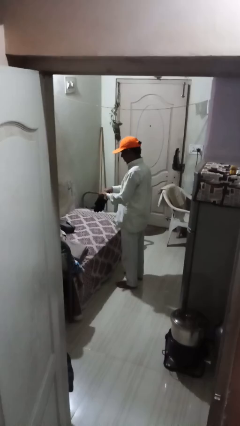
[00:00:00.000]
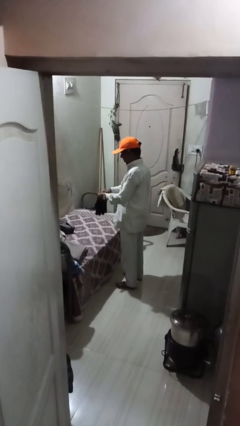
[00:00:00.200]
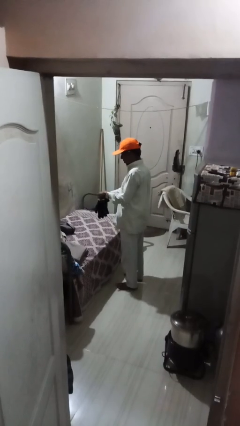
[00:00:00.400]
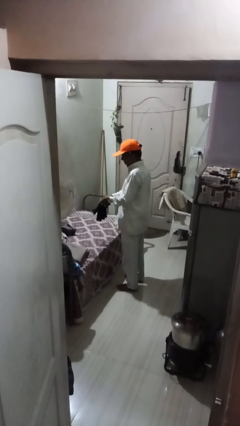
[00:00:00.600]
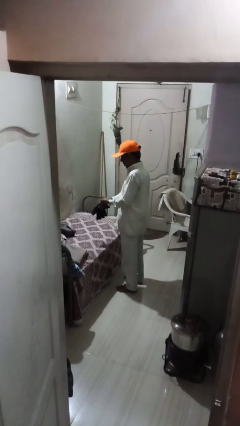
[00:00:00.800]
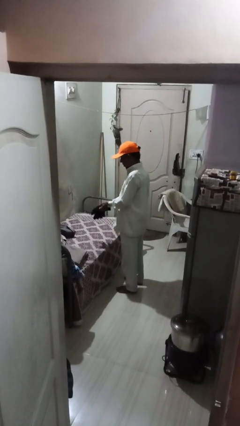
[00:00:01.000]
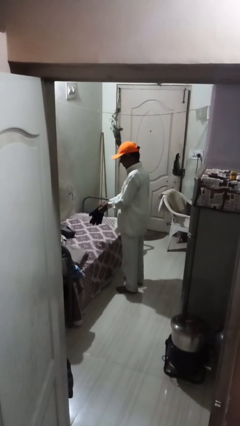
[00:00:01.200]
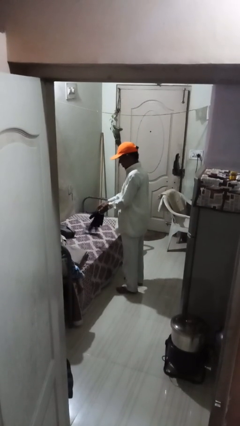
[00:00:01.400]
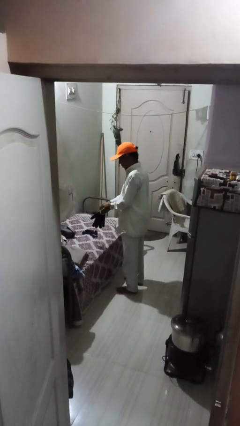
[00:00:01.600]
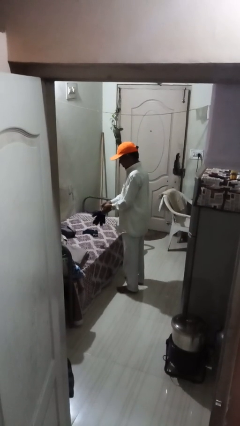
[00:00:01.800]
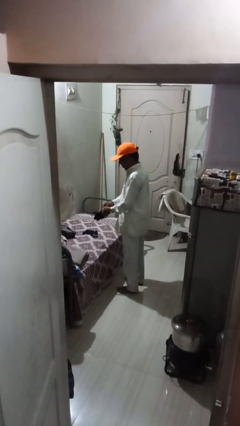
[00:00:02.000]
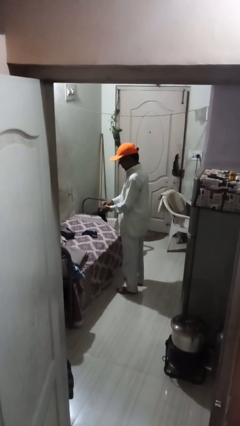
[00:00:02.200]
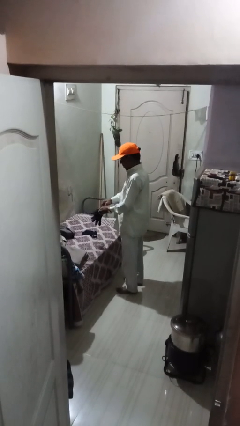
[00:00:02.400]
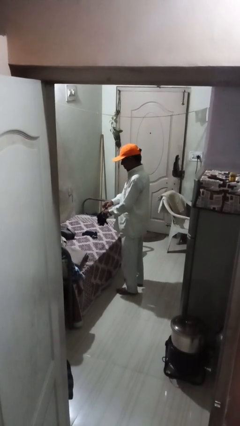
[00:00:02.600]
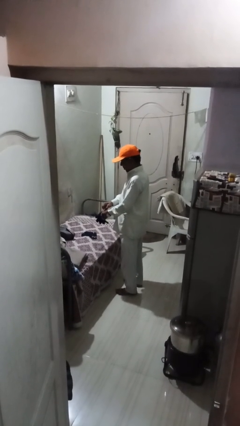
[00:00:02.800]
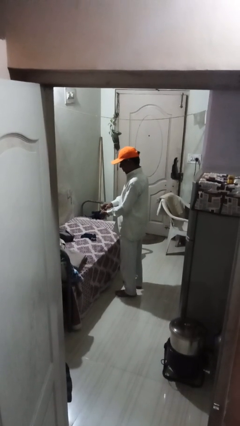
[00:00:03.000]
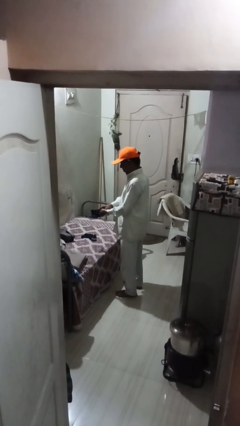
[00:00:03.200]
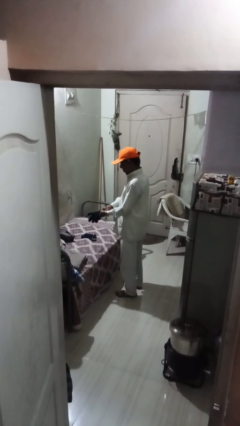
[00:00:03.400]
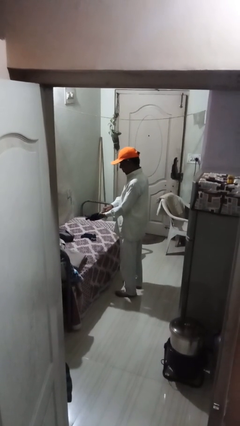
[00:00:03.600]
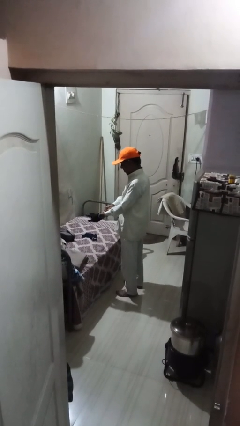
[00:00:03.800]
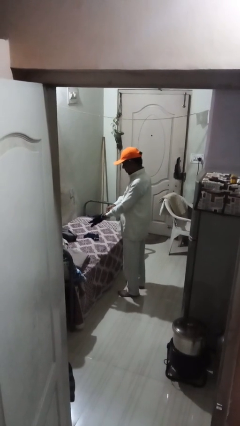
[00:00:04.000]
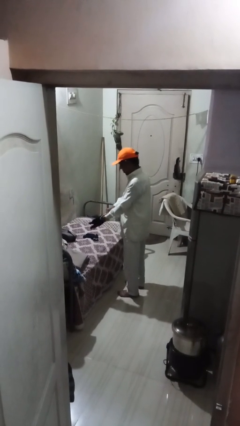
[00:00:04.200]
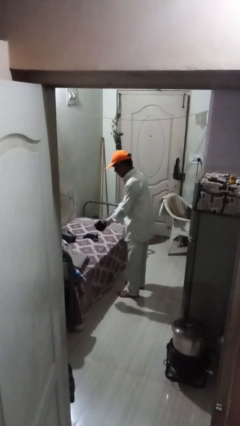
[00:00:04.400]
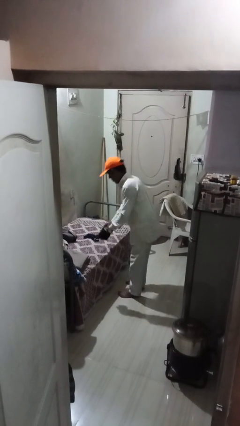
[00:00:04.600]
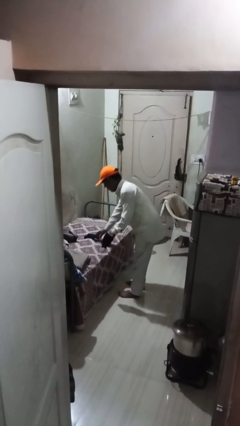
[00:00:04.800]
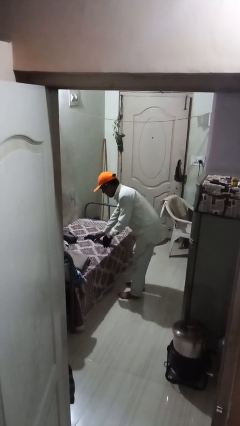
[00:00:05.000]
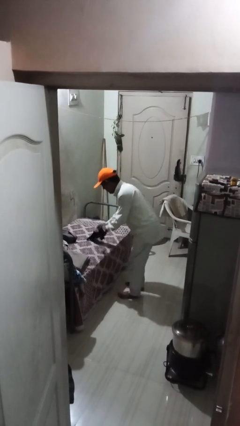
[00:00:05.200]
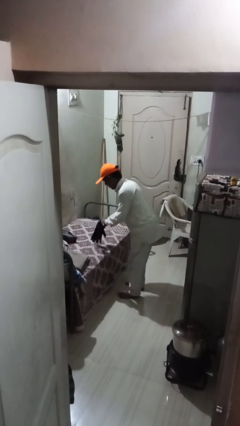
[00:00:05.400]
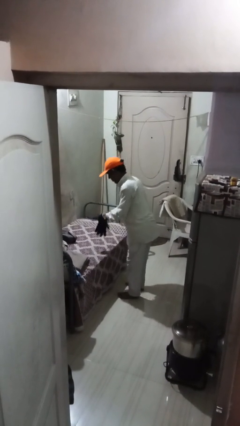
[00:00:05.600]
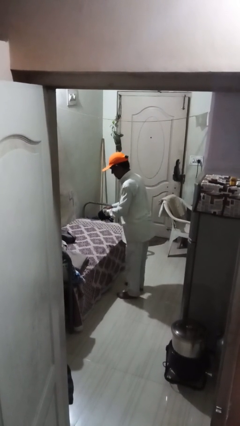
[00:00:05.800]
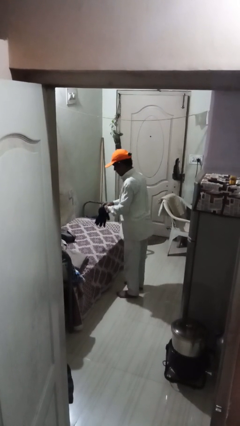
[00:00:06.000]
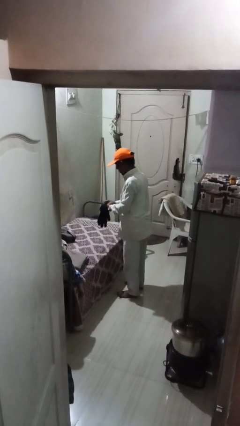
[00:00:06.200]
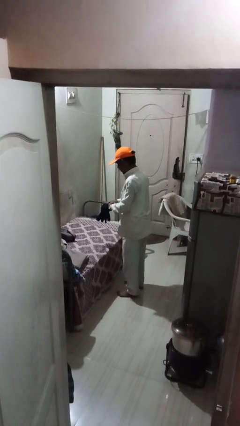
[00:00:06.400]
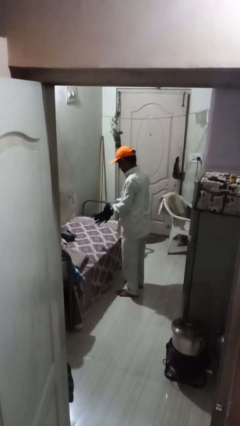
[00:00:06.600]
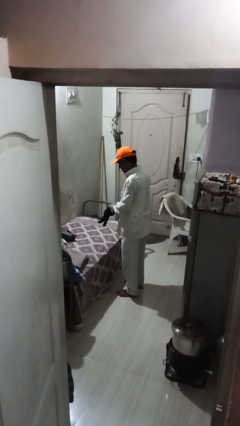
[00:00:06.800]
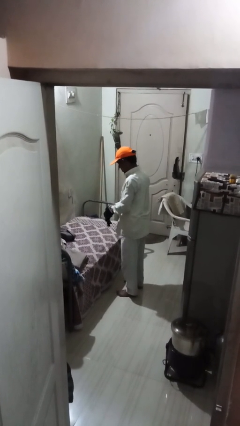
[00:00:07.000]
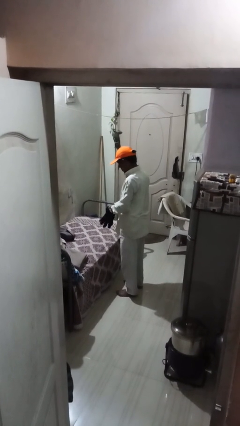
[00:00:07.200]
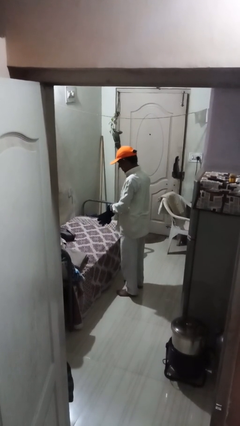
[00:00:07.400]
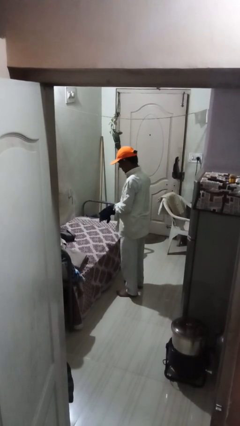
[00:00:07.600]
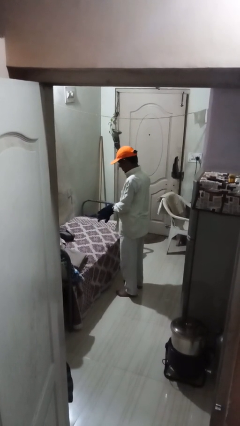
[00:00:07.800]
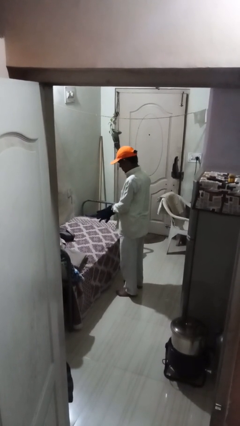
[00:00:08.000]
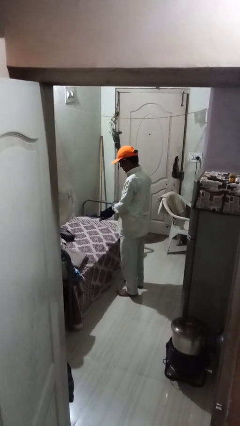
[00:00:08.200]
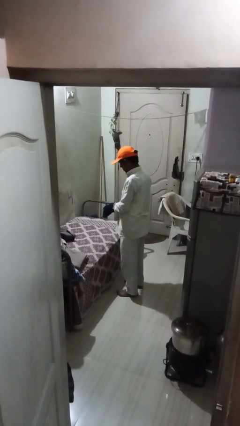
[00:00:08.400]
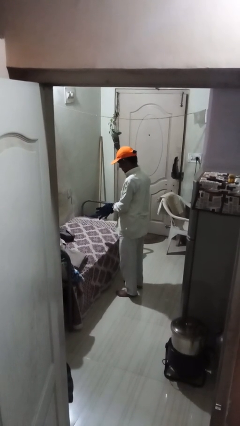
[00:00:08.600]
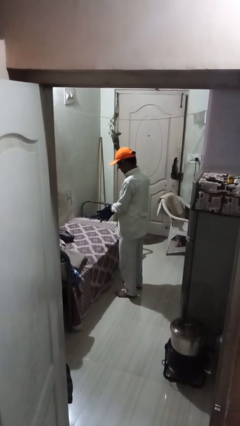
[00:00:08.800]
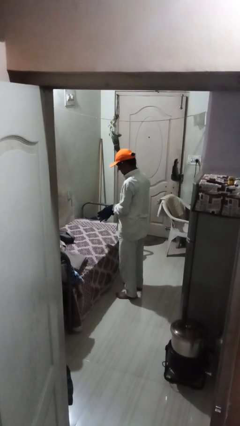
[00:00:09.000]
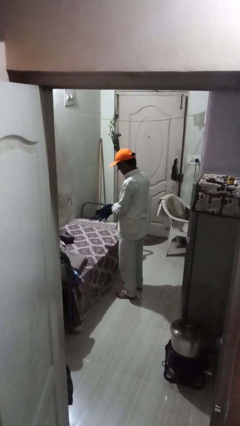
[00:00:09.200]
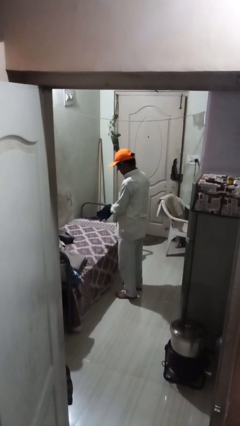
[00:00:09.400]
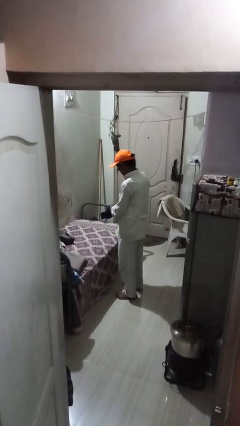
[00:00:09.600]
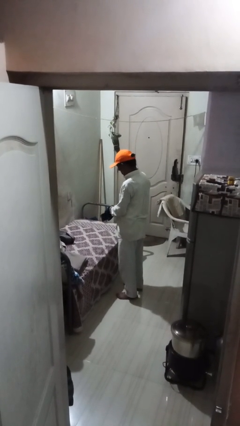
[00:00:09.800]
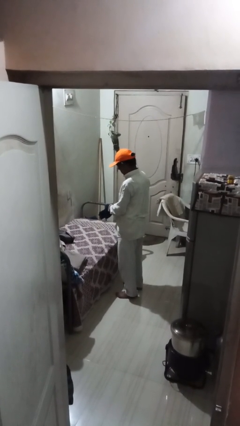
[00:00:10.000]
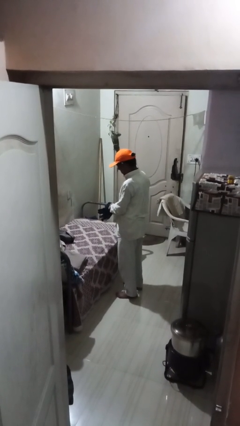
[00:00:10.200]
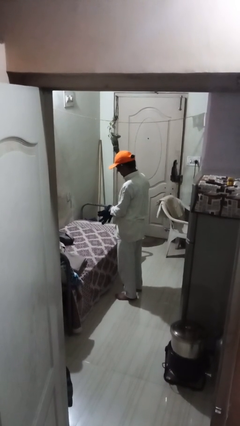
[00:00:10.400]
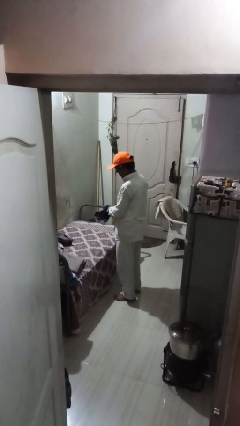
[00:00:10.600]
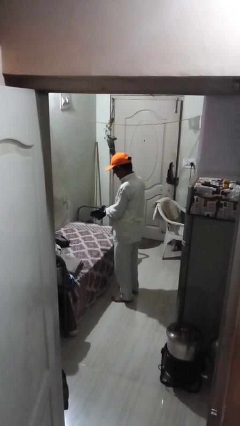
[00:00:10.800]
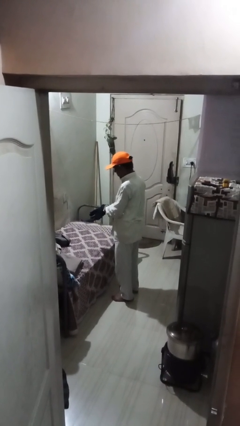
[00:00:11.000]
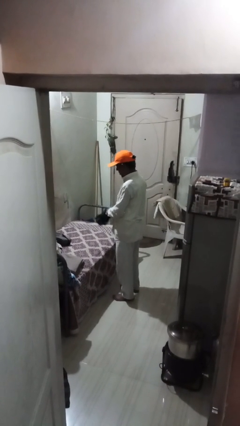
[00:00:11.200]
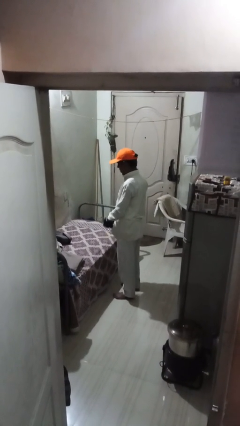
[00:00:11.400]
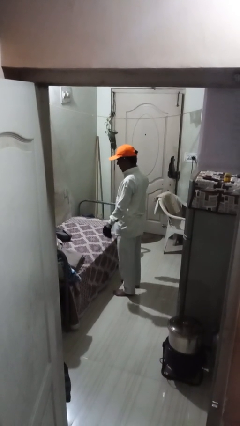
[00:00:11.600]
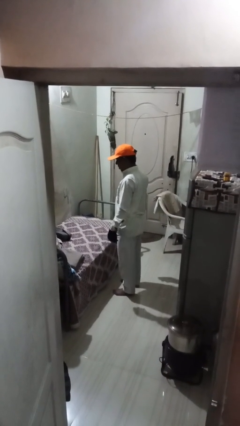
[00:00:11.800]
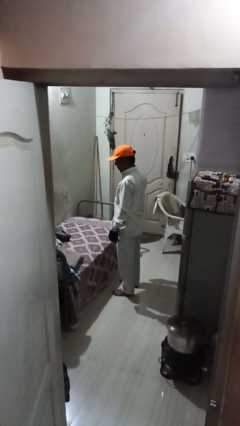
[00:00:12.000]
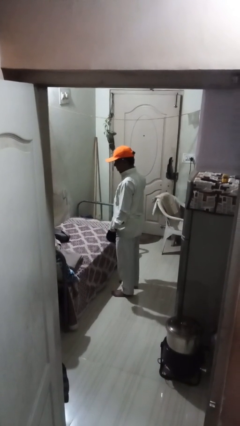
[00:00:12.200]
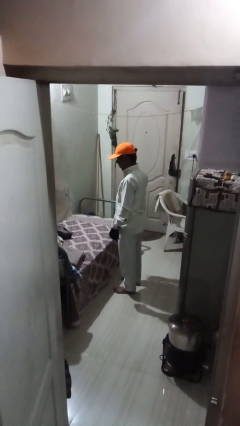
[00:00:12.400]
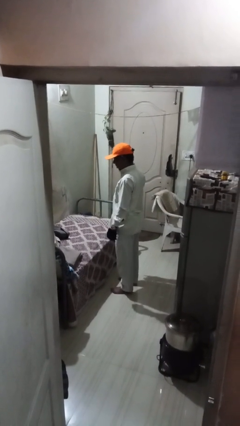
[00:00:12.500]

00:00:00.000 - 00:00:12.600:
person puts on gloves

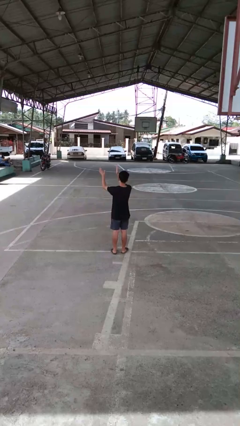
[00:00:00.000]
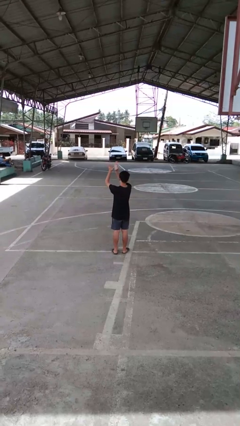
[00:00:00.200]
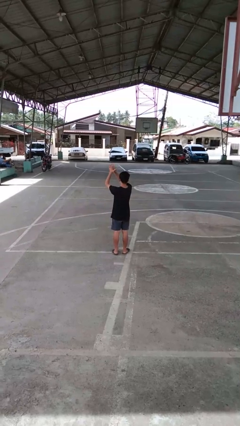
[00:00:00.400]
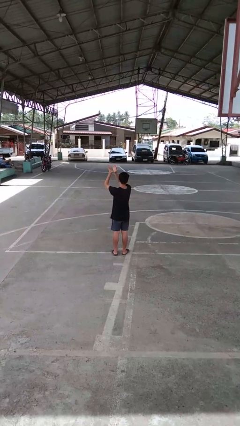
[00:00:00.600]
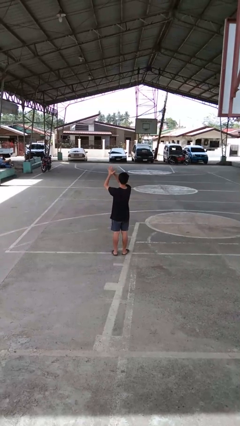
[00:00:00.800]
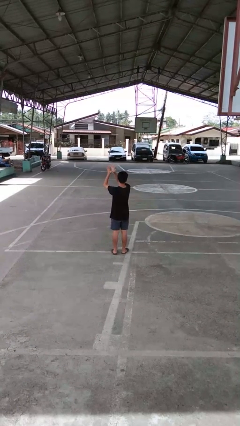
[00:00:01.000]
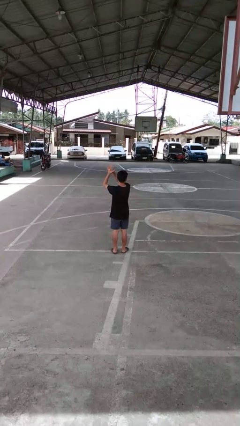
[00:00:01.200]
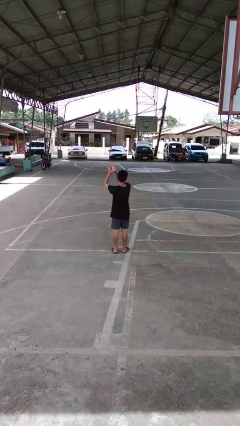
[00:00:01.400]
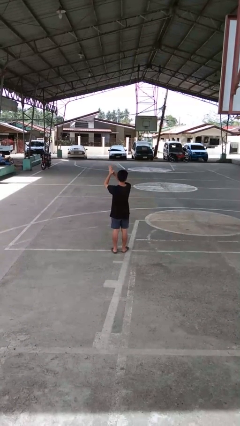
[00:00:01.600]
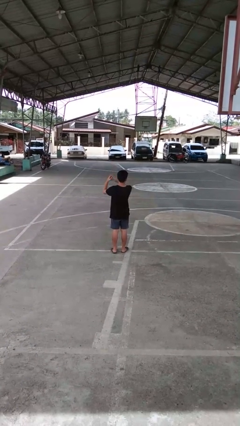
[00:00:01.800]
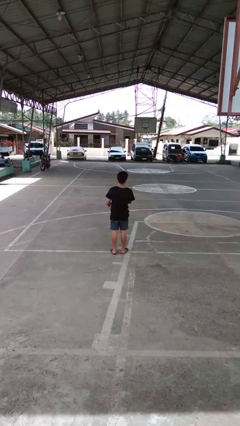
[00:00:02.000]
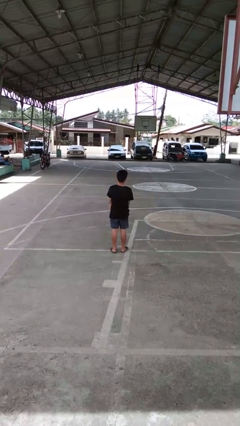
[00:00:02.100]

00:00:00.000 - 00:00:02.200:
person claps hands

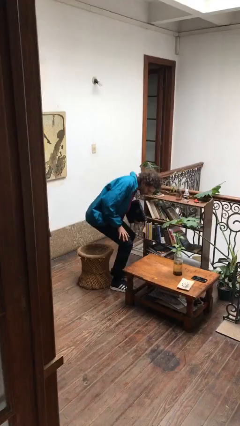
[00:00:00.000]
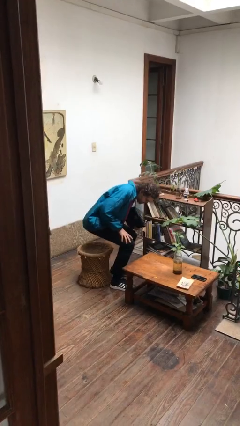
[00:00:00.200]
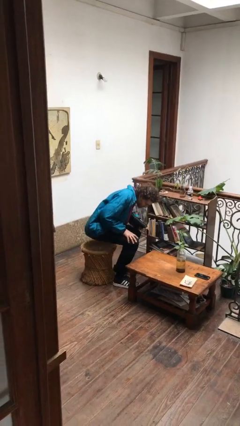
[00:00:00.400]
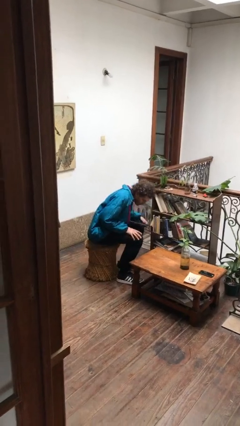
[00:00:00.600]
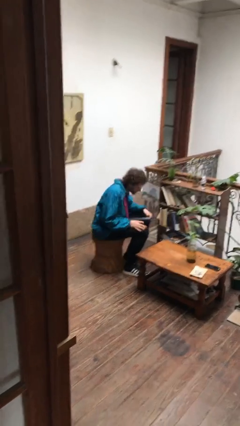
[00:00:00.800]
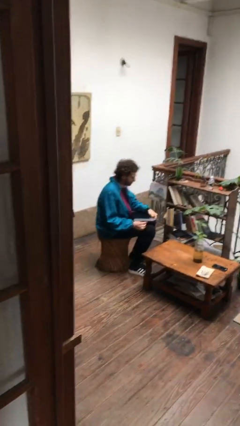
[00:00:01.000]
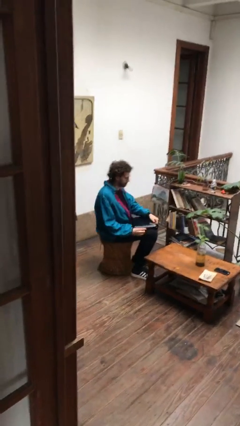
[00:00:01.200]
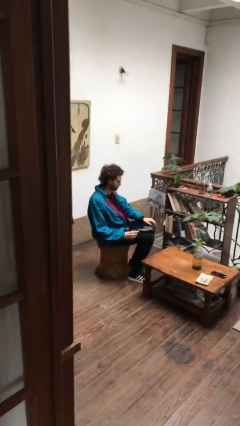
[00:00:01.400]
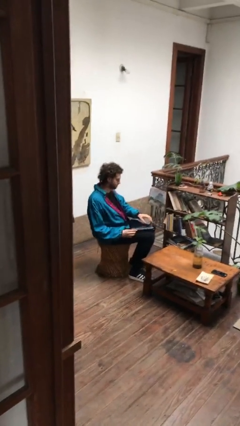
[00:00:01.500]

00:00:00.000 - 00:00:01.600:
person sits down

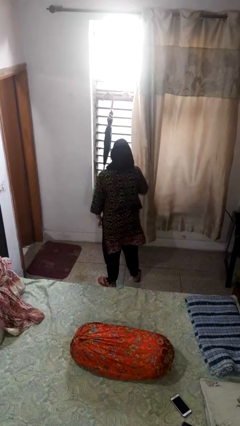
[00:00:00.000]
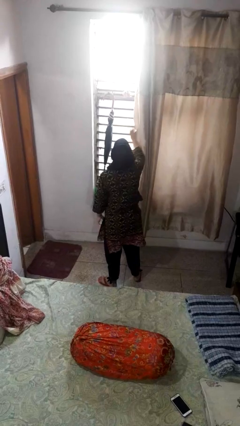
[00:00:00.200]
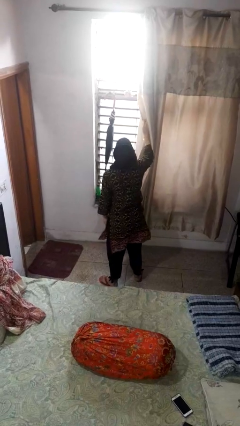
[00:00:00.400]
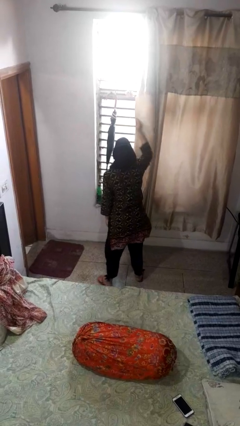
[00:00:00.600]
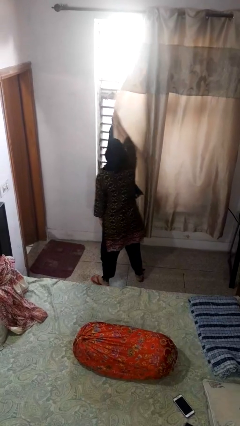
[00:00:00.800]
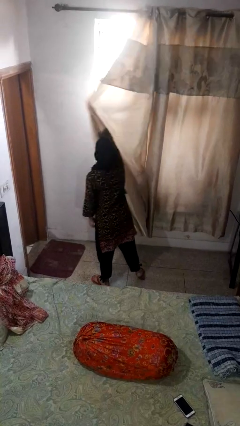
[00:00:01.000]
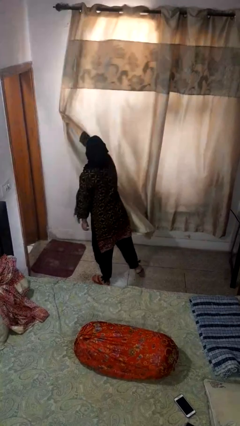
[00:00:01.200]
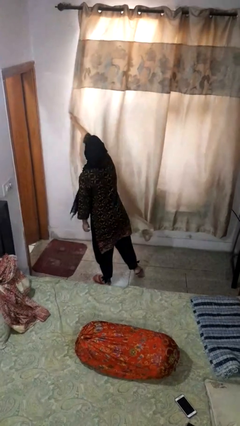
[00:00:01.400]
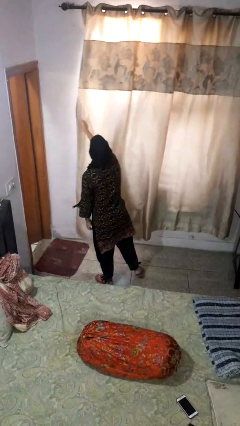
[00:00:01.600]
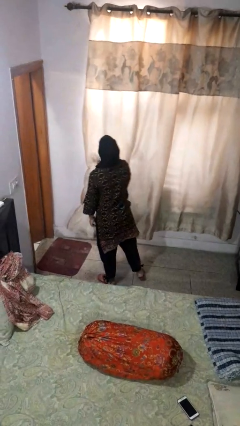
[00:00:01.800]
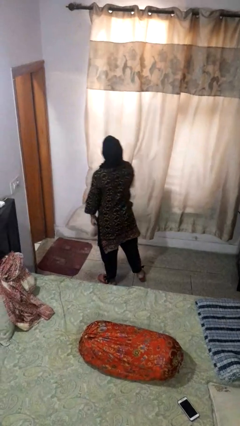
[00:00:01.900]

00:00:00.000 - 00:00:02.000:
person closes curtains
